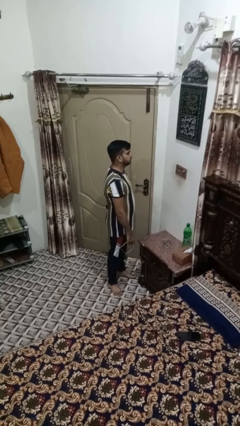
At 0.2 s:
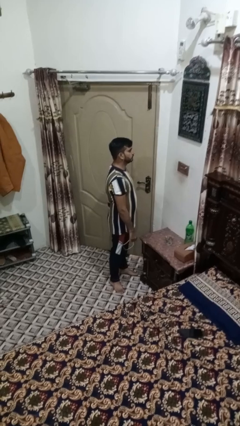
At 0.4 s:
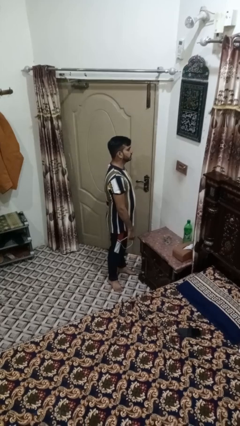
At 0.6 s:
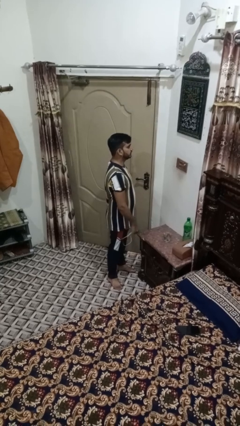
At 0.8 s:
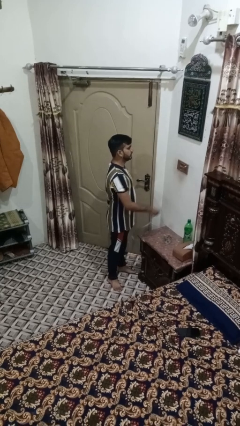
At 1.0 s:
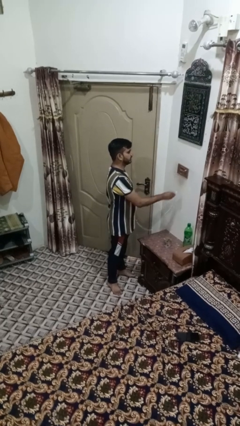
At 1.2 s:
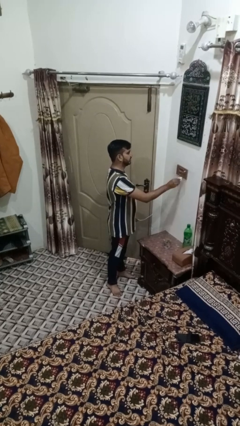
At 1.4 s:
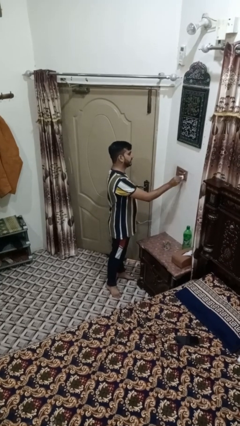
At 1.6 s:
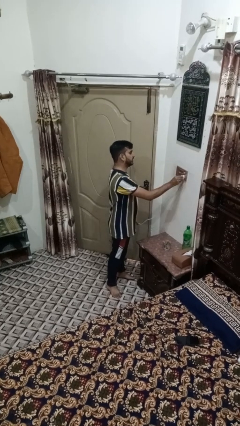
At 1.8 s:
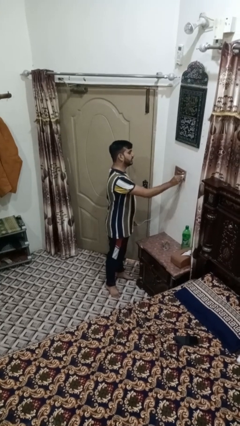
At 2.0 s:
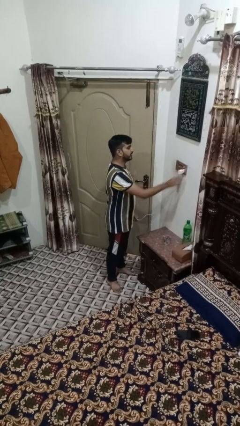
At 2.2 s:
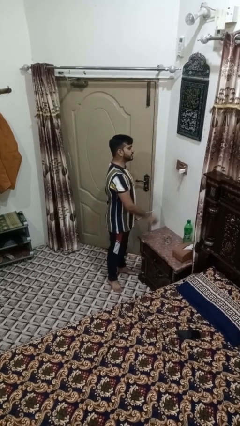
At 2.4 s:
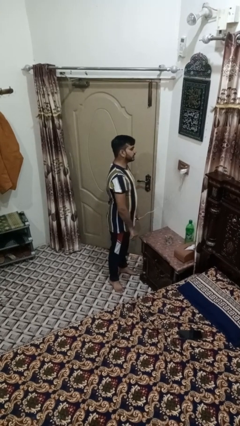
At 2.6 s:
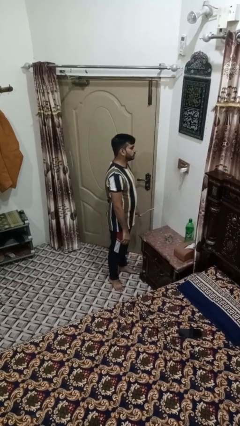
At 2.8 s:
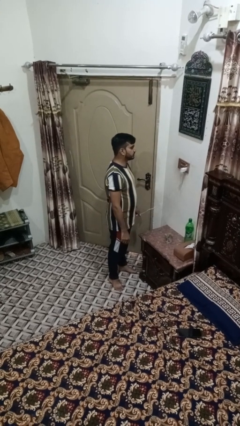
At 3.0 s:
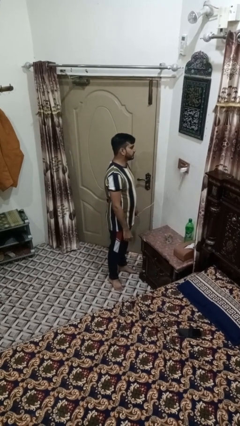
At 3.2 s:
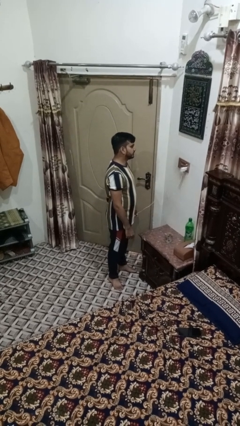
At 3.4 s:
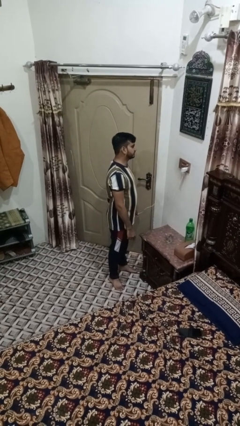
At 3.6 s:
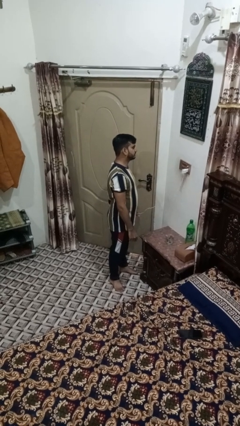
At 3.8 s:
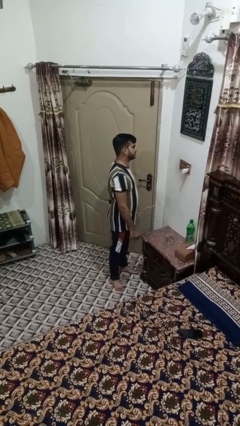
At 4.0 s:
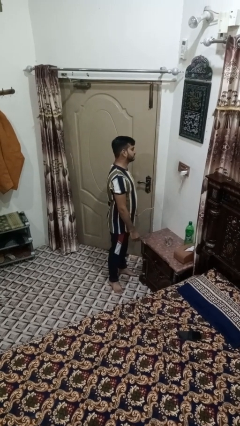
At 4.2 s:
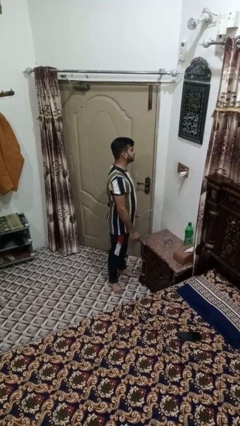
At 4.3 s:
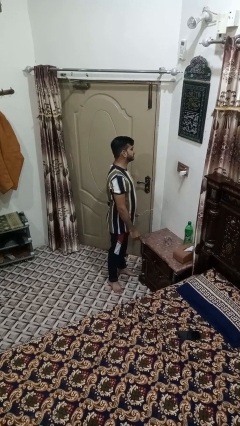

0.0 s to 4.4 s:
person plugs into electrical socket

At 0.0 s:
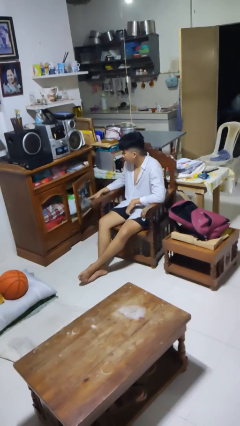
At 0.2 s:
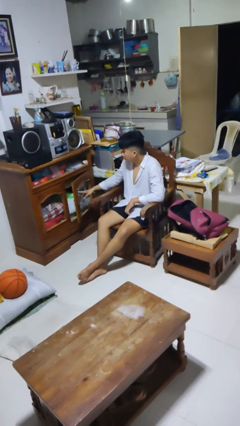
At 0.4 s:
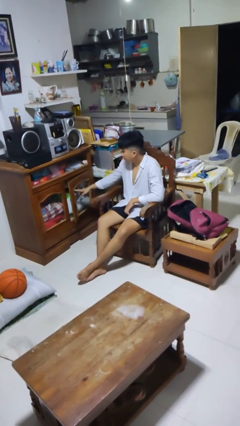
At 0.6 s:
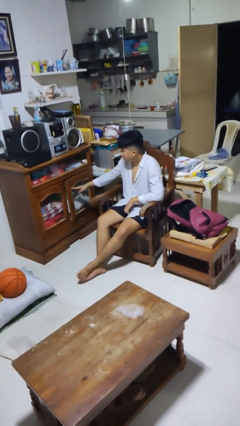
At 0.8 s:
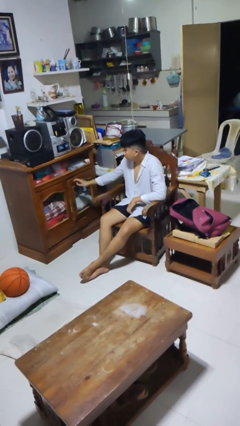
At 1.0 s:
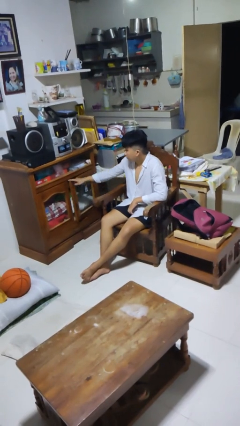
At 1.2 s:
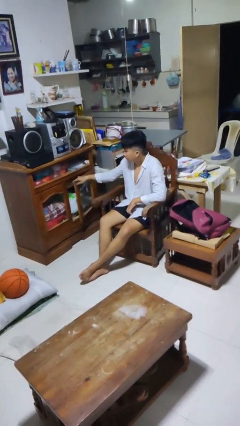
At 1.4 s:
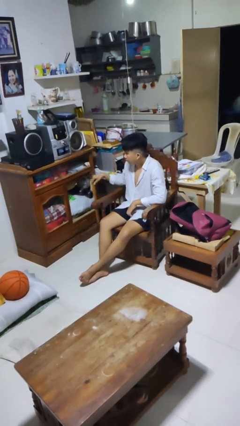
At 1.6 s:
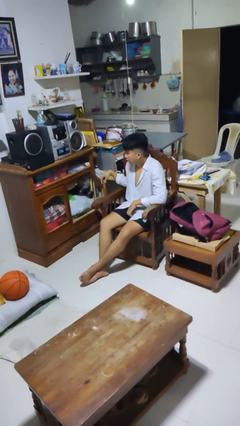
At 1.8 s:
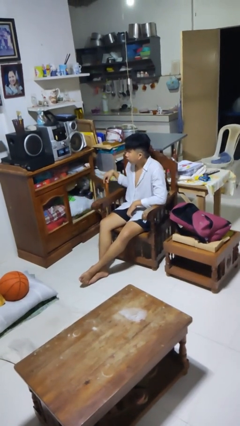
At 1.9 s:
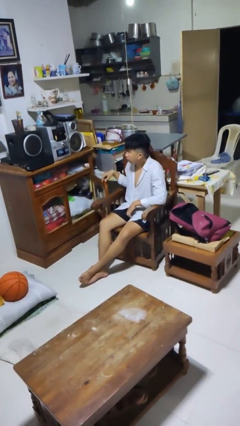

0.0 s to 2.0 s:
person opens dresser drawer

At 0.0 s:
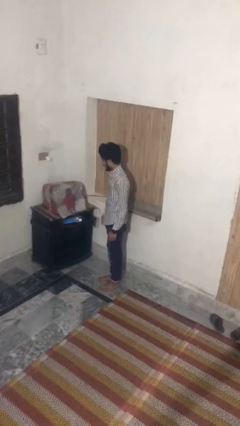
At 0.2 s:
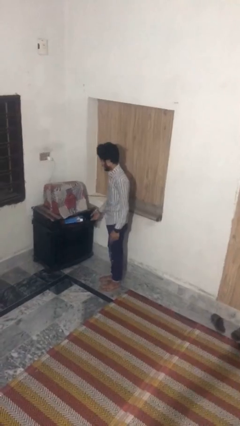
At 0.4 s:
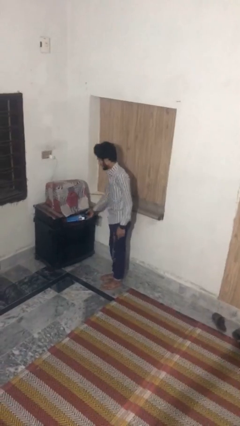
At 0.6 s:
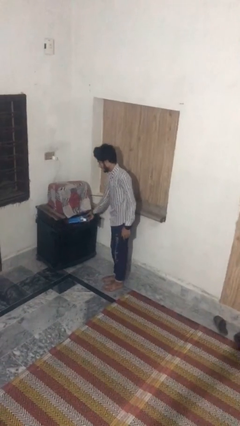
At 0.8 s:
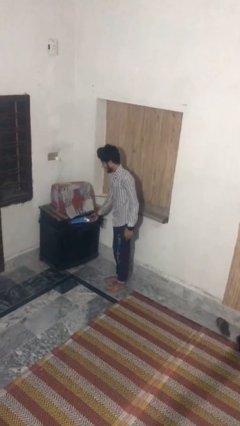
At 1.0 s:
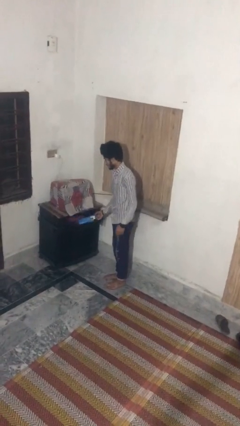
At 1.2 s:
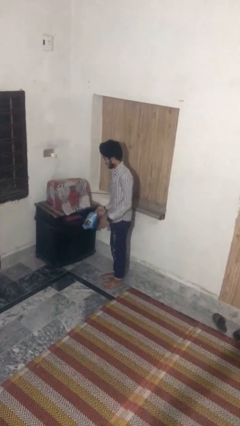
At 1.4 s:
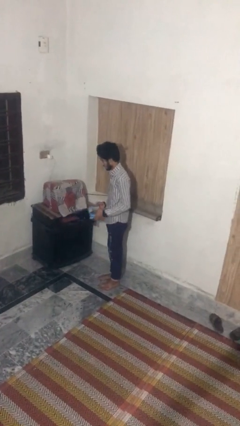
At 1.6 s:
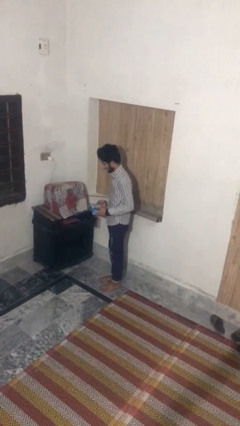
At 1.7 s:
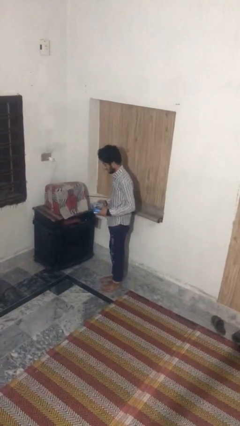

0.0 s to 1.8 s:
person picks up object from cabinet

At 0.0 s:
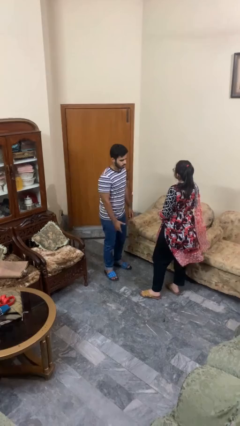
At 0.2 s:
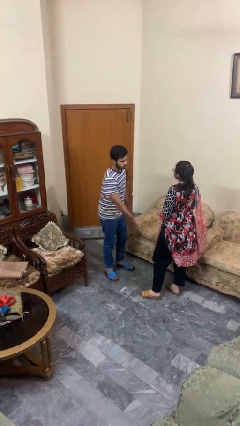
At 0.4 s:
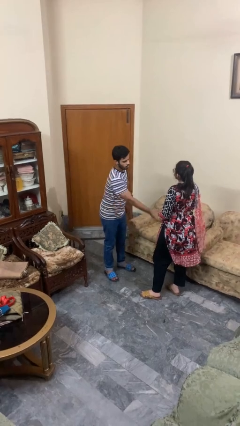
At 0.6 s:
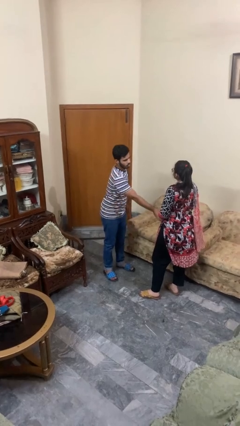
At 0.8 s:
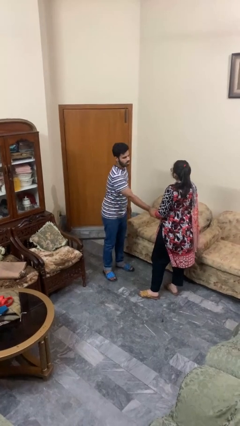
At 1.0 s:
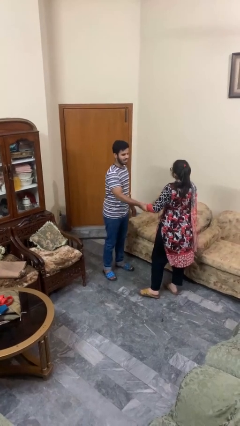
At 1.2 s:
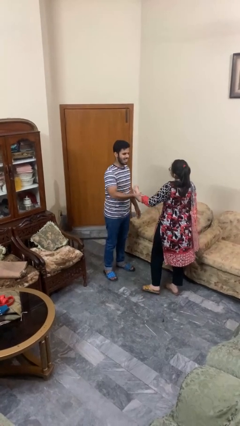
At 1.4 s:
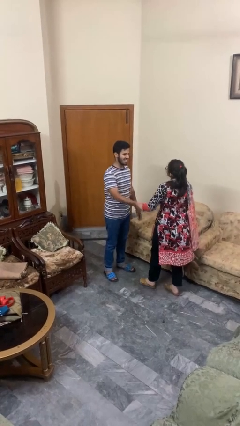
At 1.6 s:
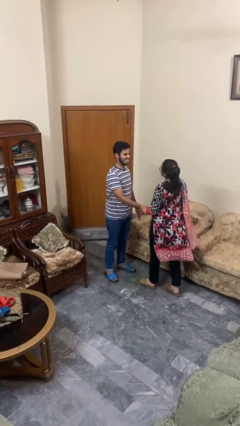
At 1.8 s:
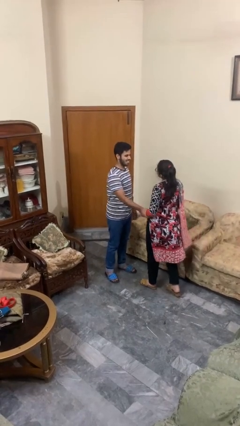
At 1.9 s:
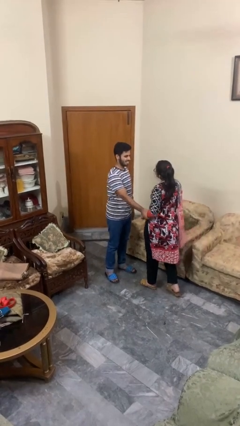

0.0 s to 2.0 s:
person grabs person by forearm

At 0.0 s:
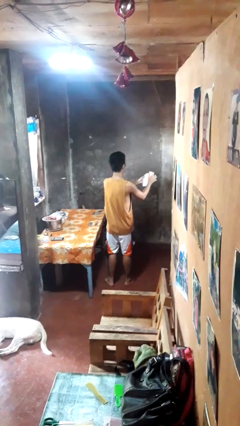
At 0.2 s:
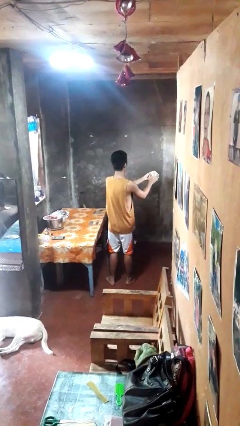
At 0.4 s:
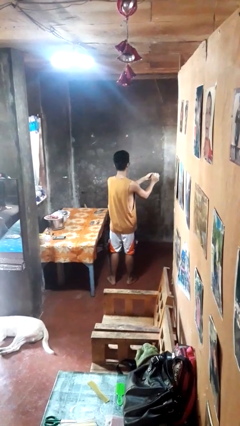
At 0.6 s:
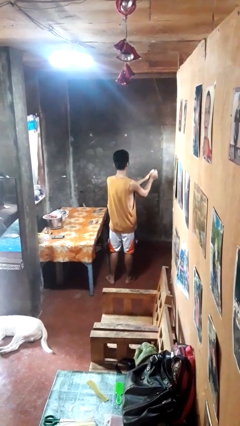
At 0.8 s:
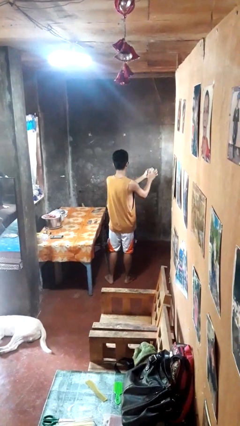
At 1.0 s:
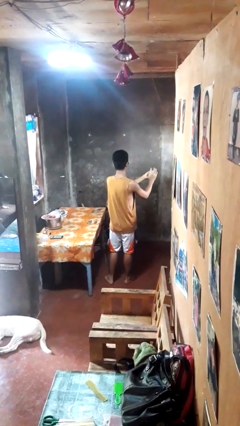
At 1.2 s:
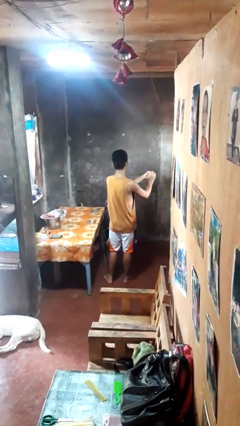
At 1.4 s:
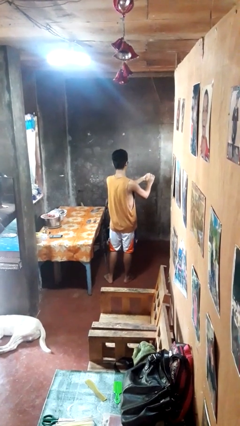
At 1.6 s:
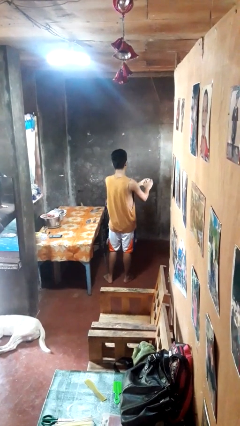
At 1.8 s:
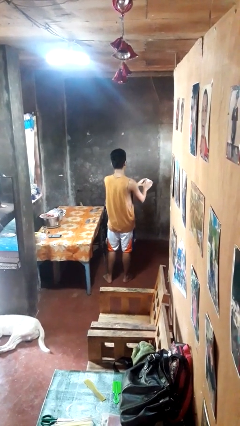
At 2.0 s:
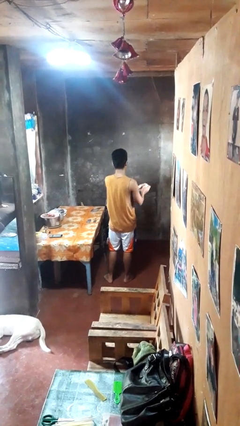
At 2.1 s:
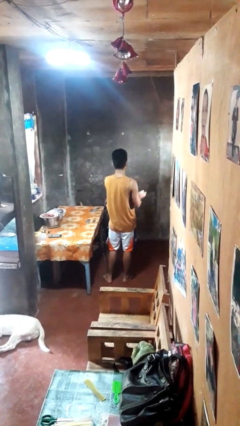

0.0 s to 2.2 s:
person crumples paper

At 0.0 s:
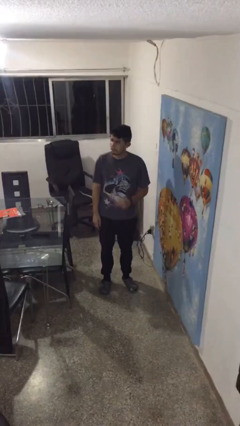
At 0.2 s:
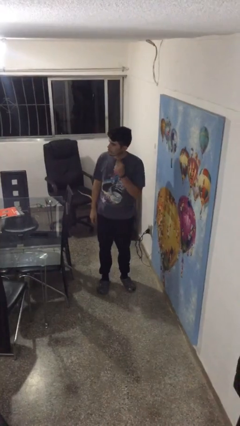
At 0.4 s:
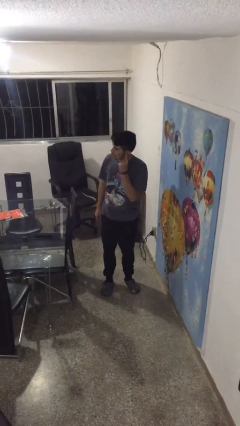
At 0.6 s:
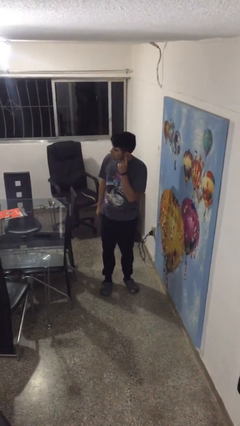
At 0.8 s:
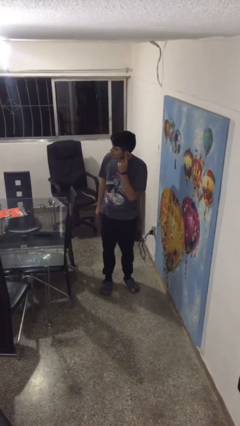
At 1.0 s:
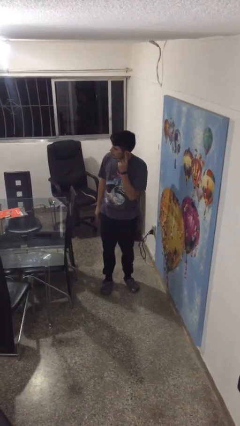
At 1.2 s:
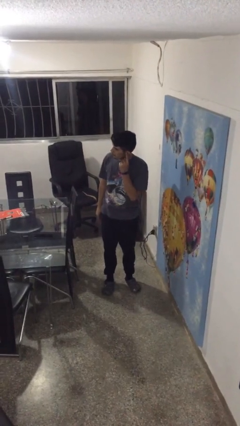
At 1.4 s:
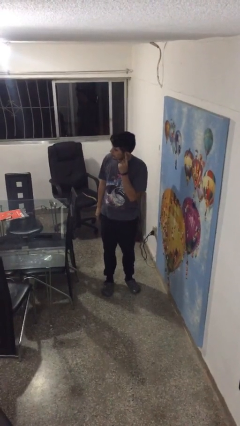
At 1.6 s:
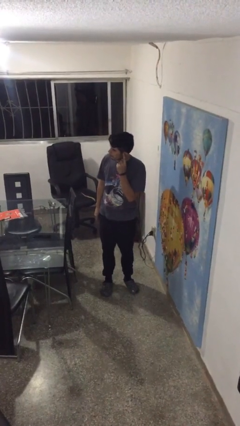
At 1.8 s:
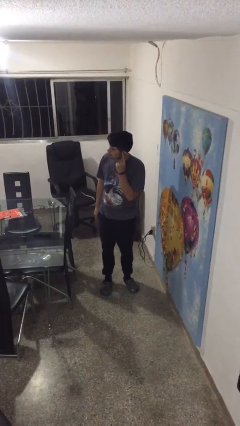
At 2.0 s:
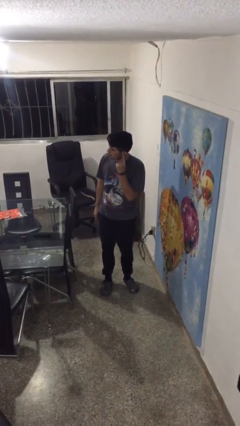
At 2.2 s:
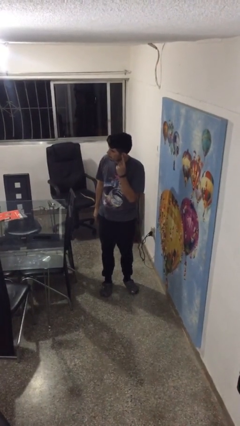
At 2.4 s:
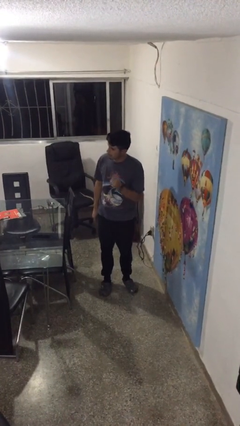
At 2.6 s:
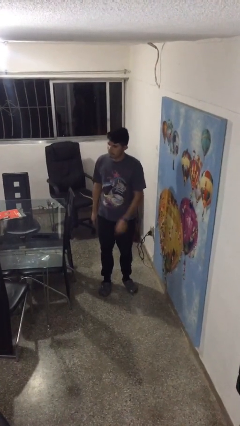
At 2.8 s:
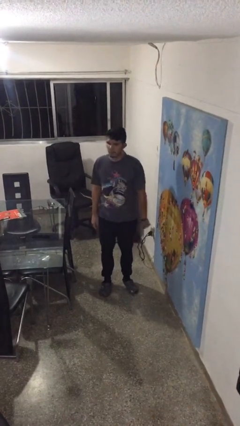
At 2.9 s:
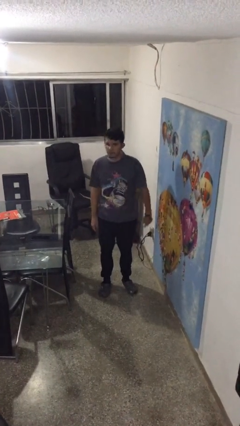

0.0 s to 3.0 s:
person gestures listen closely

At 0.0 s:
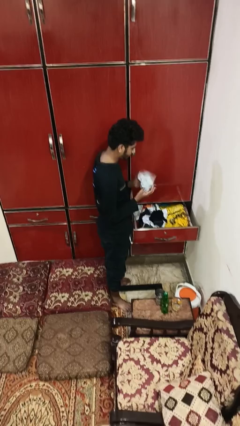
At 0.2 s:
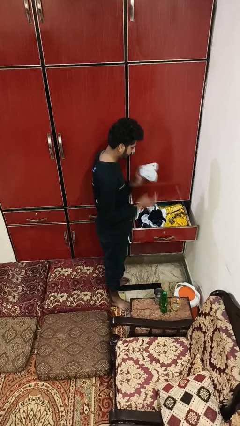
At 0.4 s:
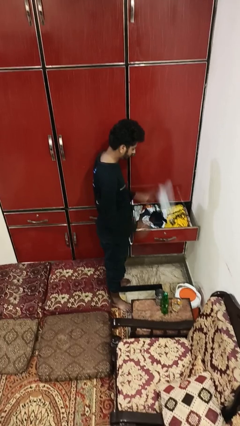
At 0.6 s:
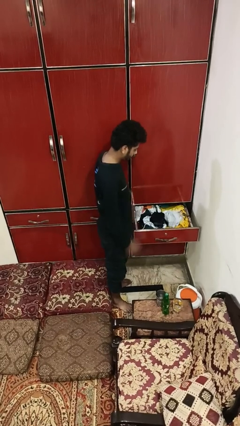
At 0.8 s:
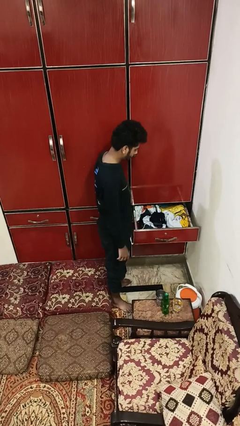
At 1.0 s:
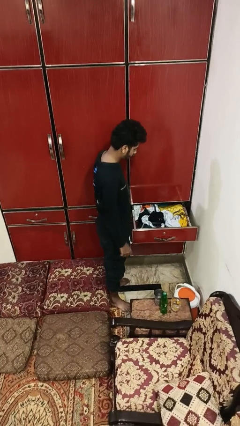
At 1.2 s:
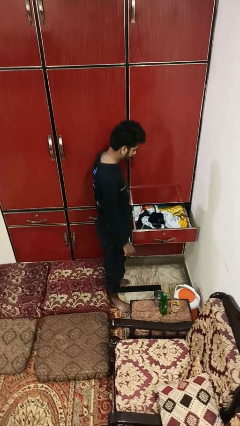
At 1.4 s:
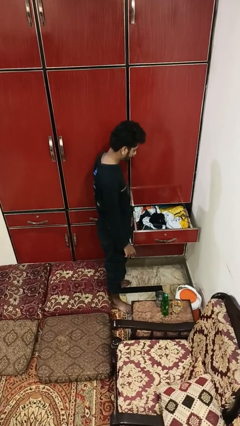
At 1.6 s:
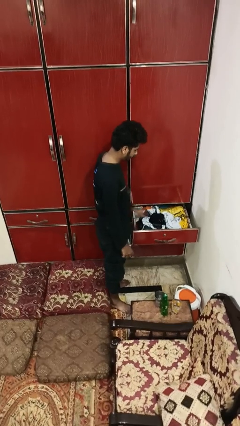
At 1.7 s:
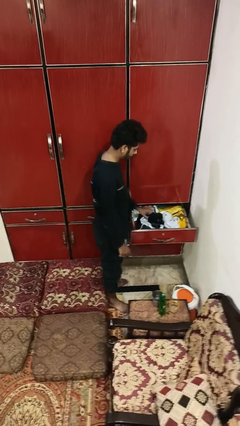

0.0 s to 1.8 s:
person puts clothes into dresser
